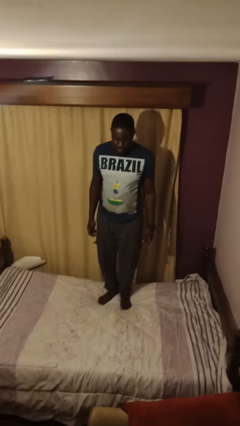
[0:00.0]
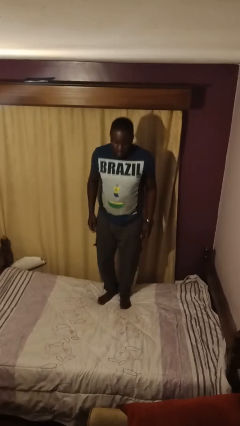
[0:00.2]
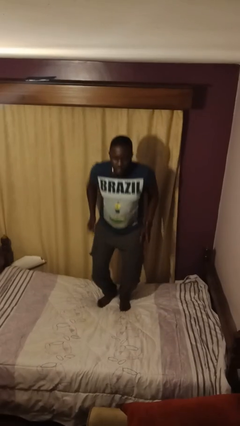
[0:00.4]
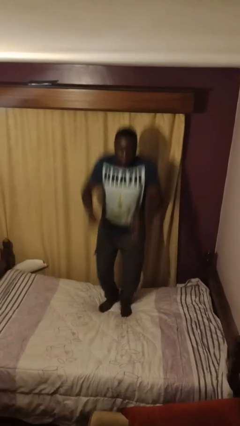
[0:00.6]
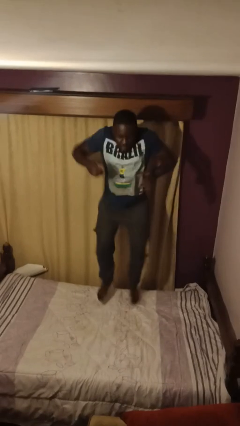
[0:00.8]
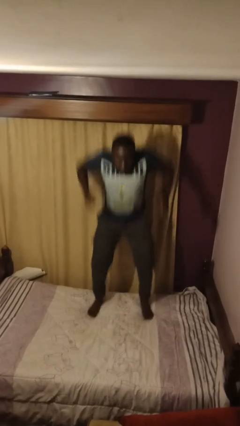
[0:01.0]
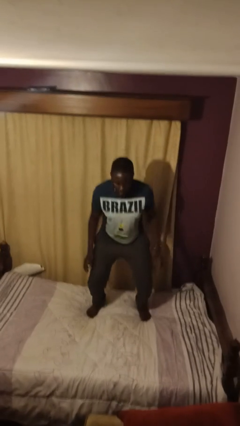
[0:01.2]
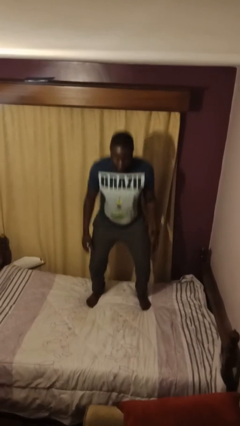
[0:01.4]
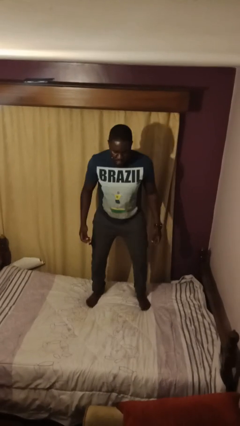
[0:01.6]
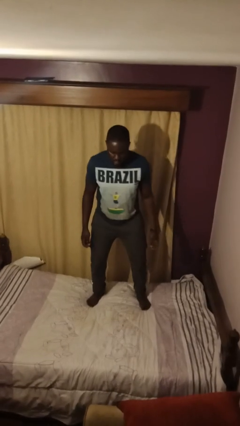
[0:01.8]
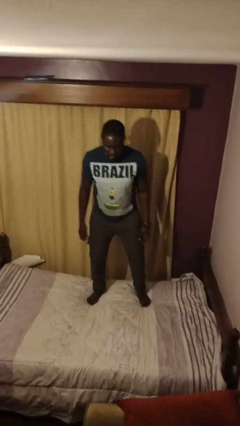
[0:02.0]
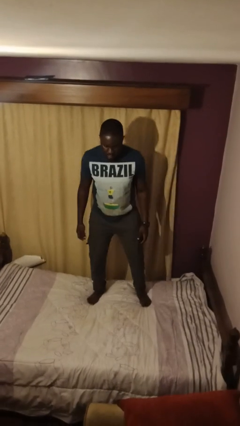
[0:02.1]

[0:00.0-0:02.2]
person jumps on bed

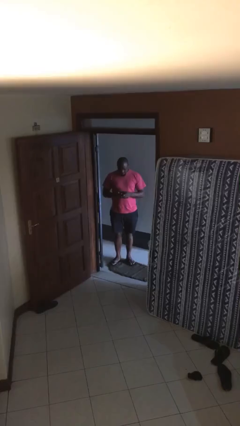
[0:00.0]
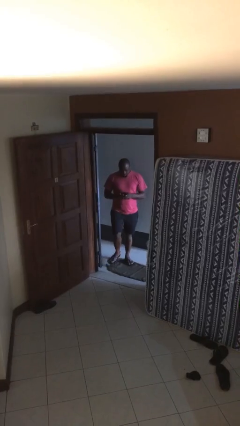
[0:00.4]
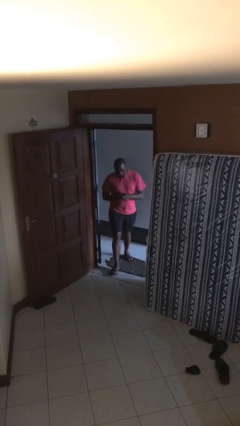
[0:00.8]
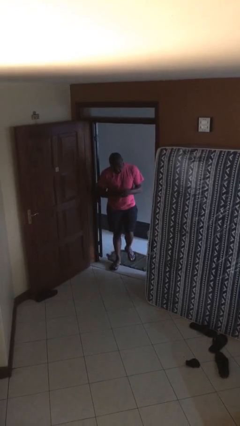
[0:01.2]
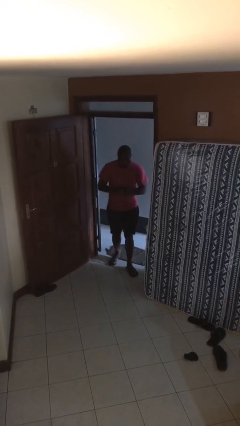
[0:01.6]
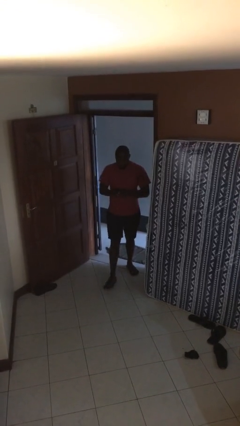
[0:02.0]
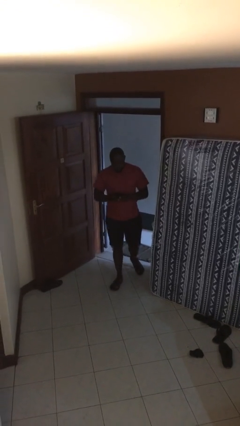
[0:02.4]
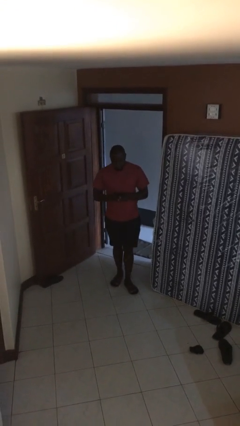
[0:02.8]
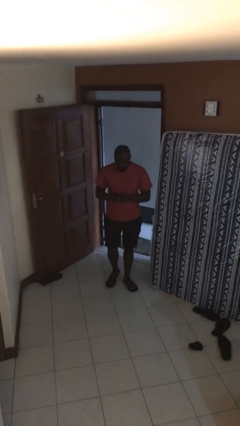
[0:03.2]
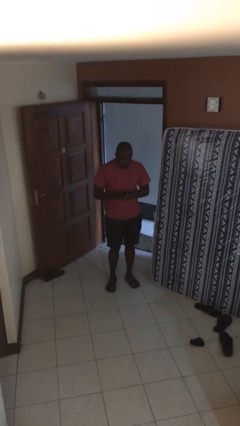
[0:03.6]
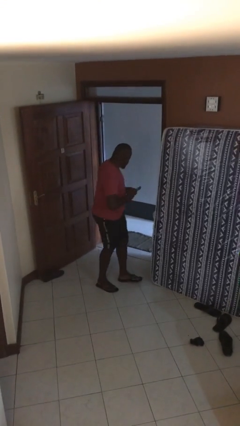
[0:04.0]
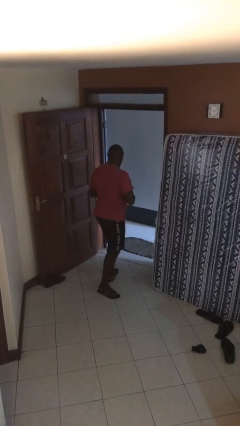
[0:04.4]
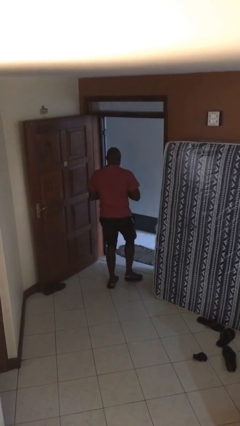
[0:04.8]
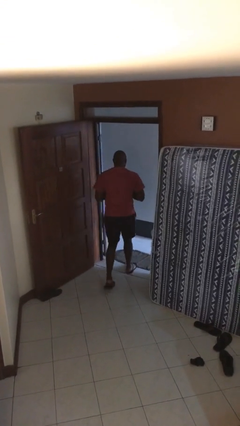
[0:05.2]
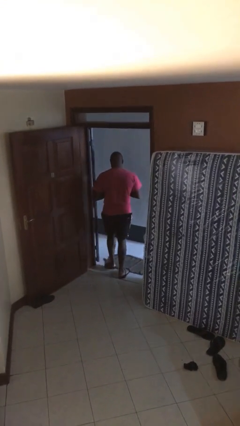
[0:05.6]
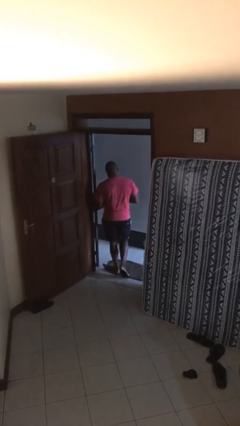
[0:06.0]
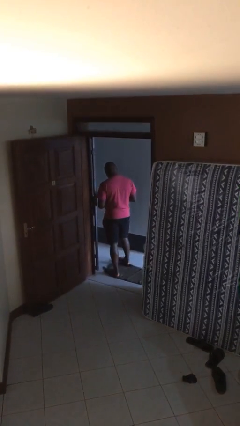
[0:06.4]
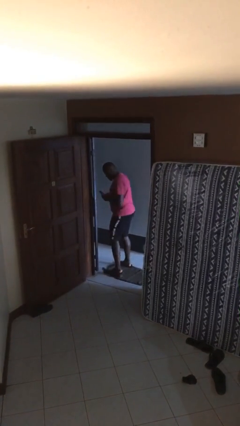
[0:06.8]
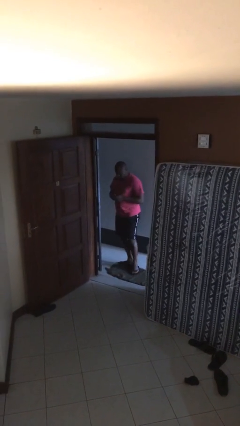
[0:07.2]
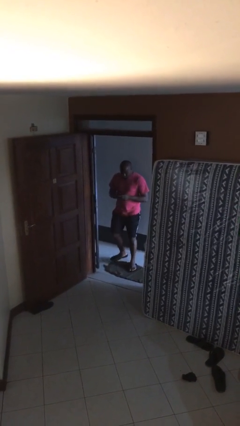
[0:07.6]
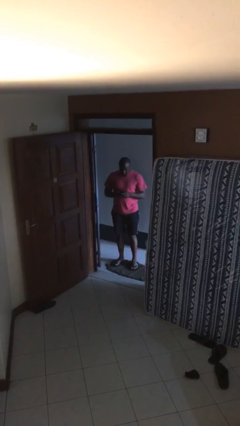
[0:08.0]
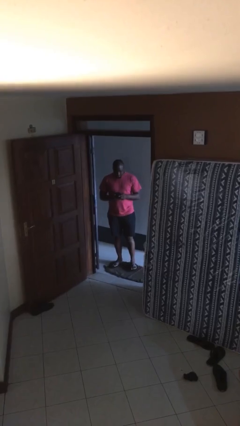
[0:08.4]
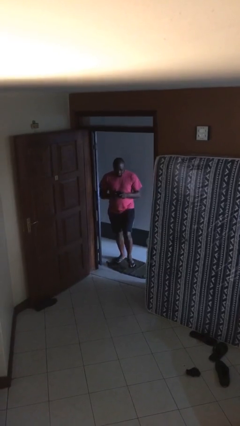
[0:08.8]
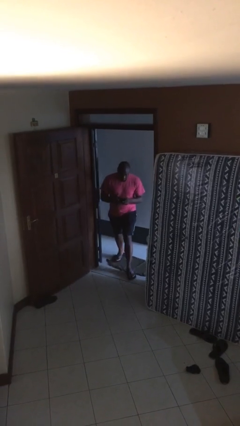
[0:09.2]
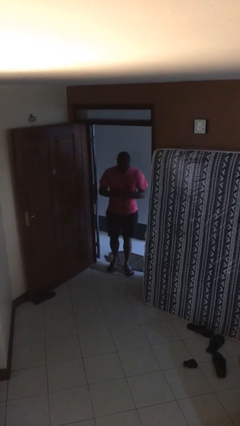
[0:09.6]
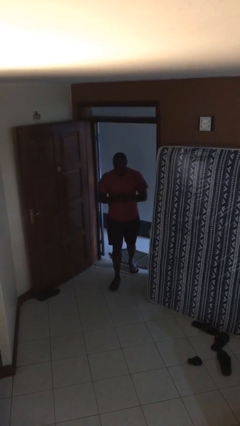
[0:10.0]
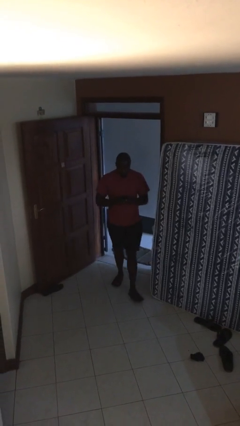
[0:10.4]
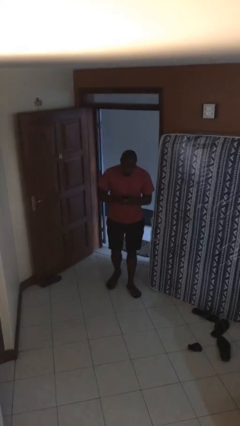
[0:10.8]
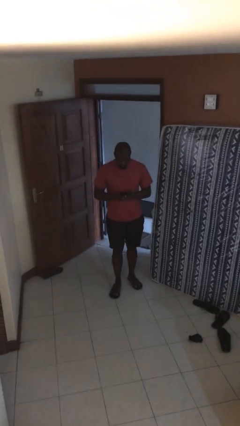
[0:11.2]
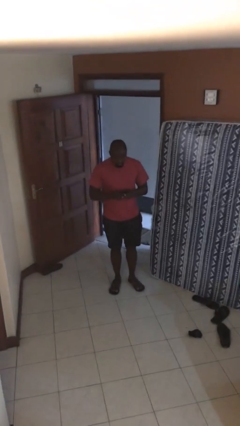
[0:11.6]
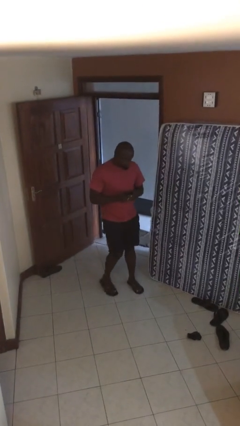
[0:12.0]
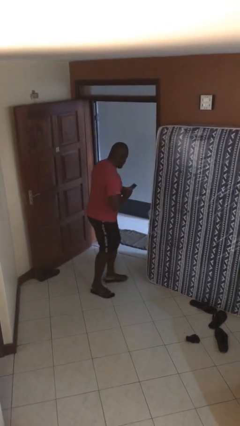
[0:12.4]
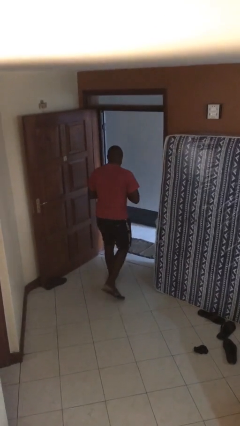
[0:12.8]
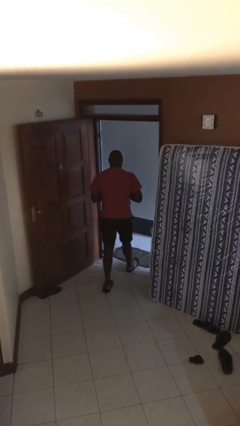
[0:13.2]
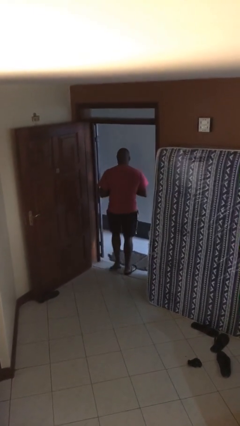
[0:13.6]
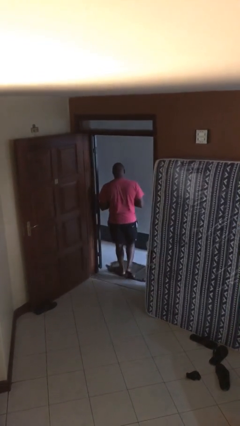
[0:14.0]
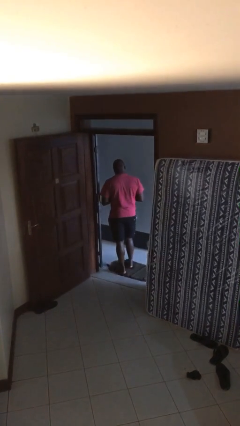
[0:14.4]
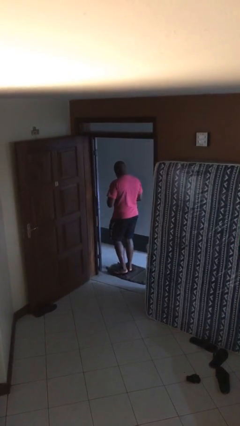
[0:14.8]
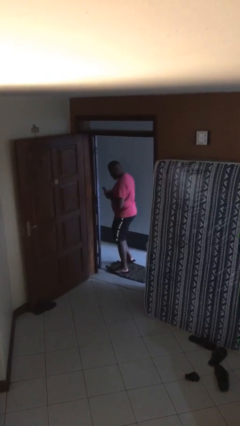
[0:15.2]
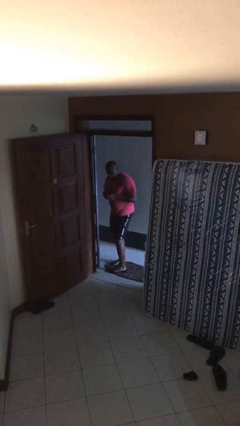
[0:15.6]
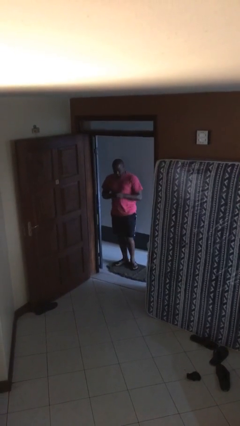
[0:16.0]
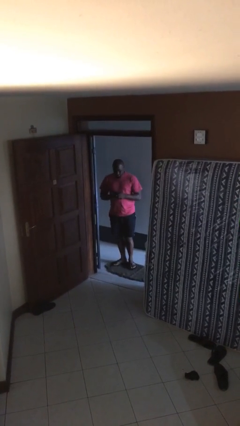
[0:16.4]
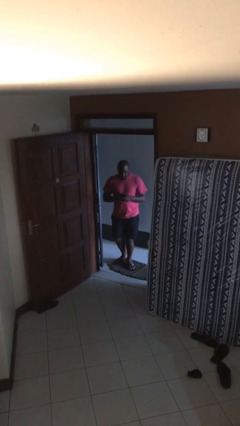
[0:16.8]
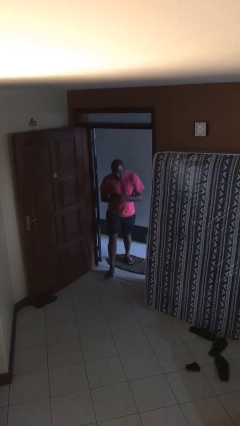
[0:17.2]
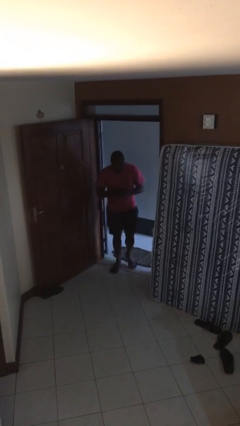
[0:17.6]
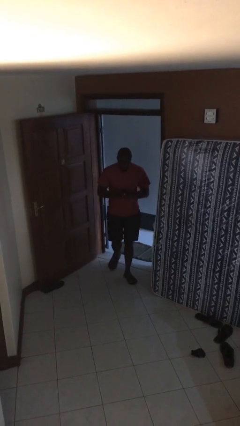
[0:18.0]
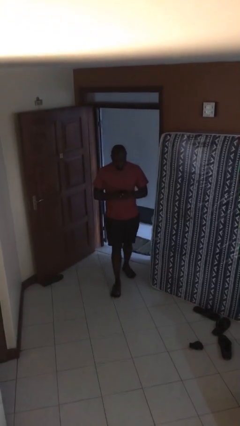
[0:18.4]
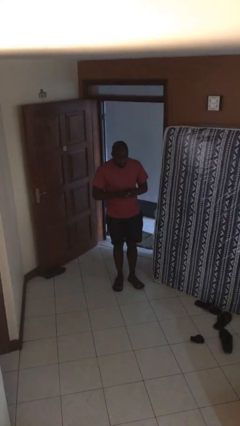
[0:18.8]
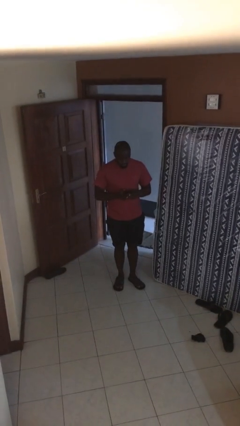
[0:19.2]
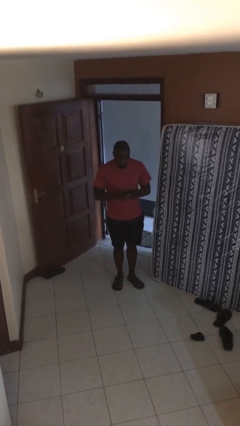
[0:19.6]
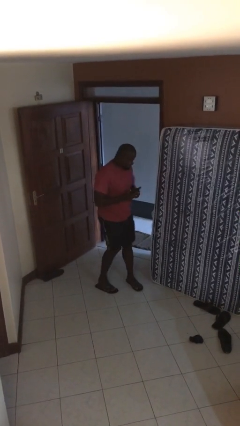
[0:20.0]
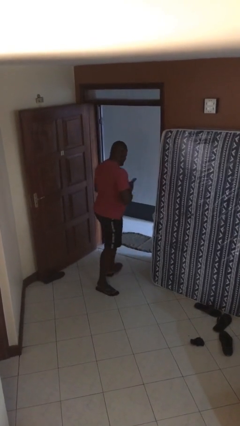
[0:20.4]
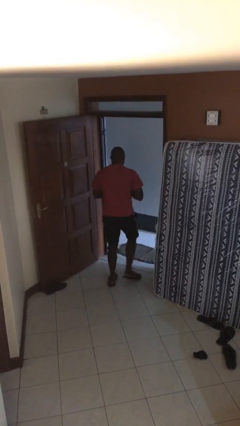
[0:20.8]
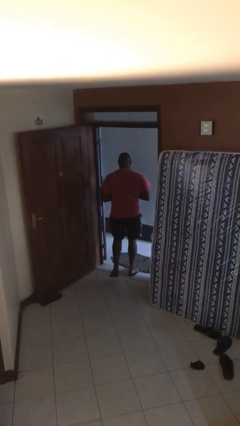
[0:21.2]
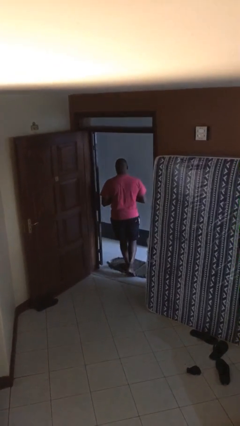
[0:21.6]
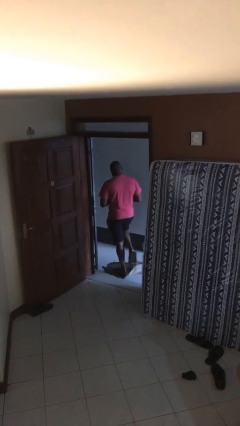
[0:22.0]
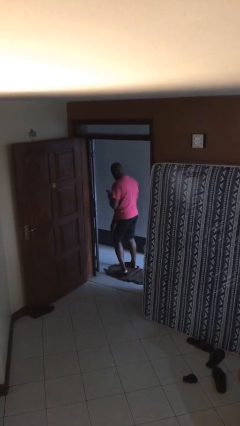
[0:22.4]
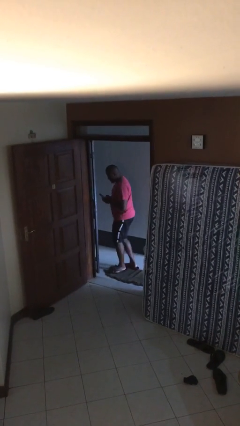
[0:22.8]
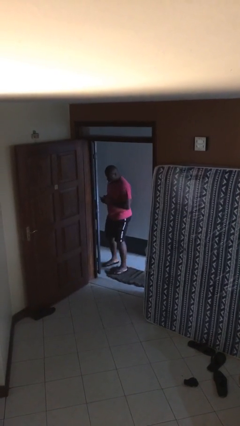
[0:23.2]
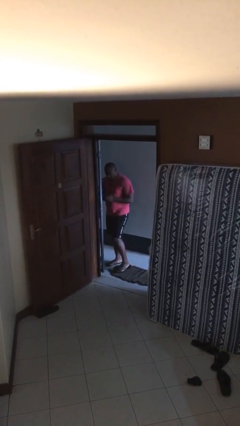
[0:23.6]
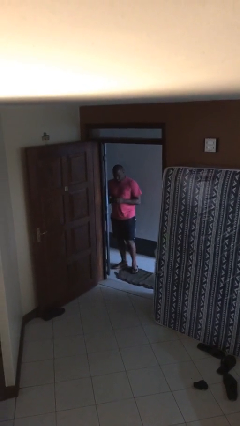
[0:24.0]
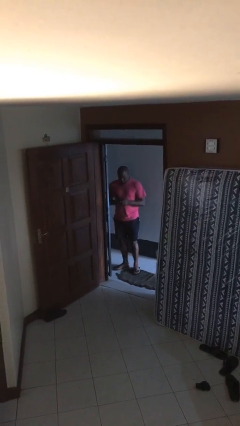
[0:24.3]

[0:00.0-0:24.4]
person texts on phone

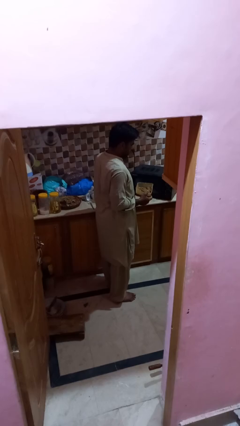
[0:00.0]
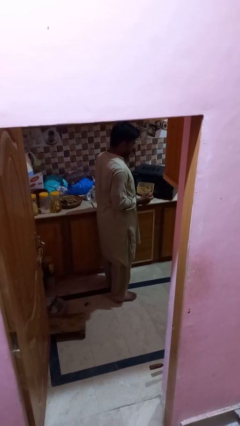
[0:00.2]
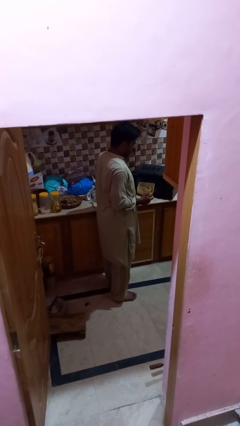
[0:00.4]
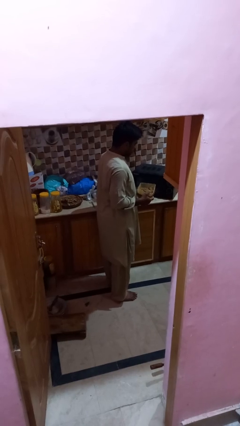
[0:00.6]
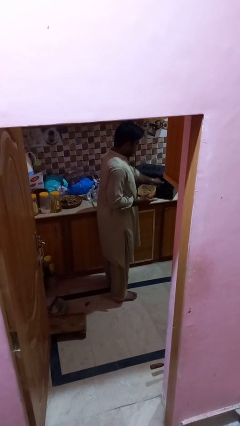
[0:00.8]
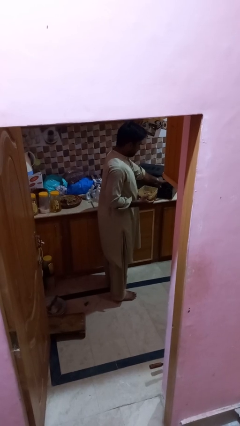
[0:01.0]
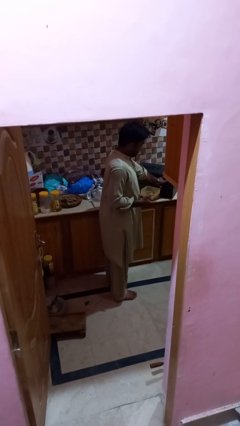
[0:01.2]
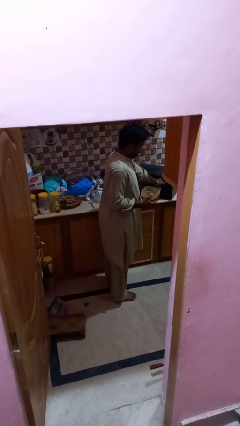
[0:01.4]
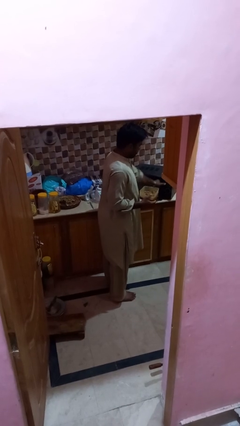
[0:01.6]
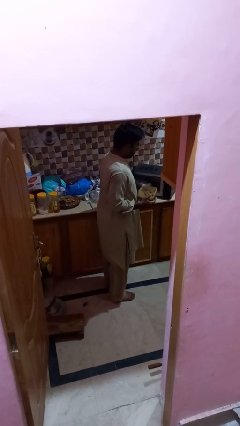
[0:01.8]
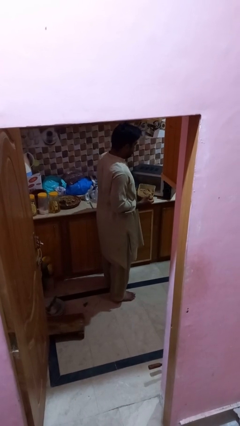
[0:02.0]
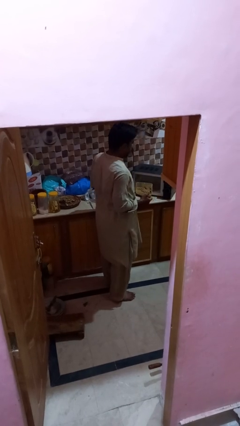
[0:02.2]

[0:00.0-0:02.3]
person opens microwave

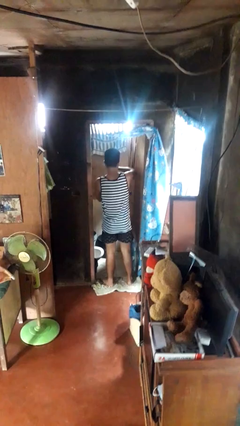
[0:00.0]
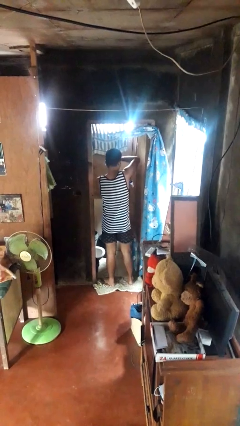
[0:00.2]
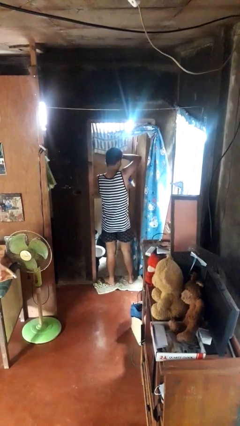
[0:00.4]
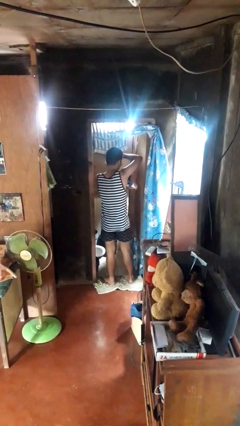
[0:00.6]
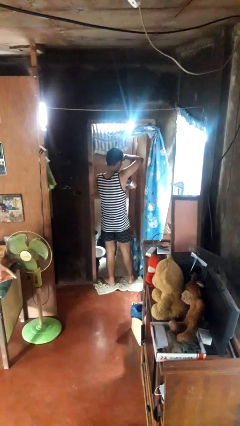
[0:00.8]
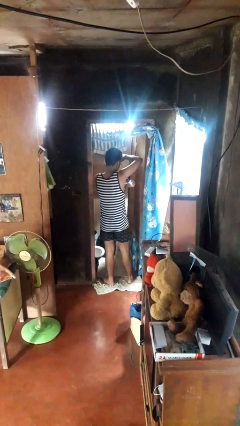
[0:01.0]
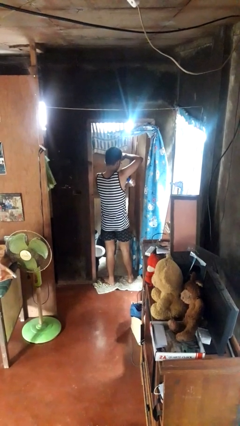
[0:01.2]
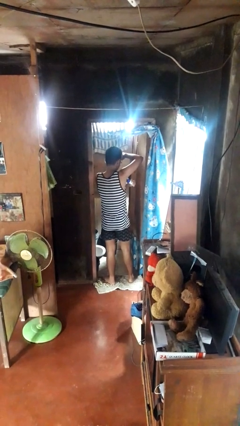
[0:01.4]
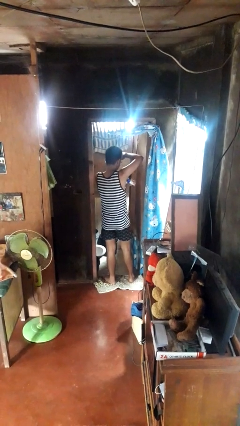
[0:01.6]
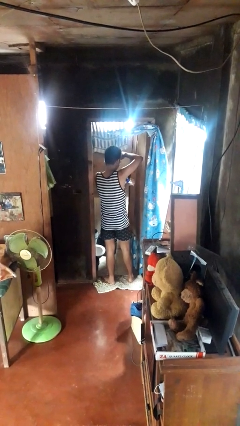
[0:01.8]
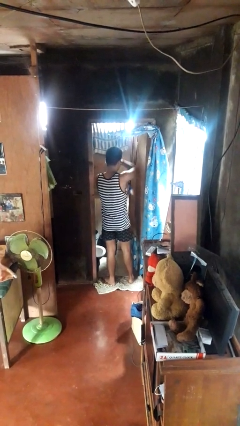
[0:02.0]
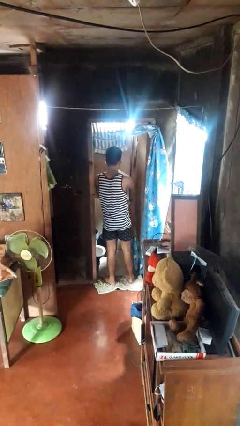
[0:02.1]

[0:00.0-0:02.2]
person applies deodorant
